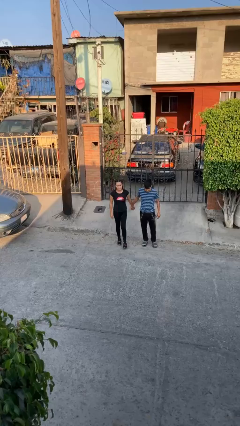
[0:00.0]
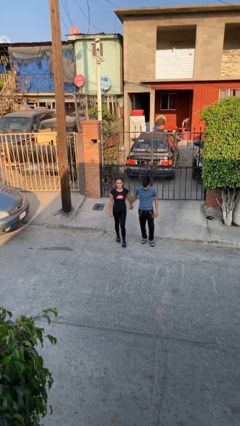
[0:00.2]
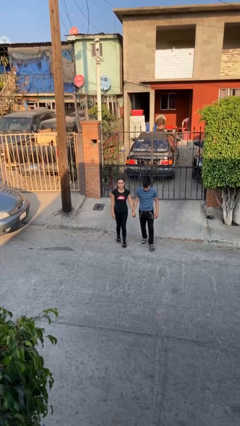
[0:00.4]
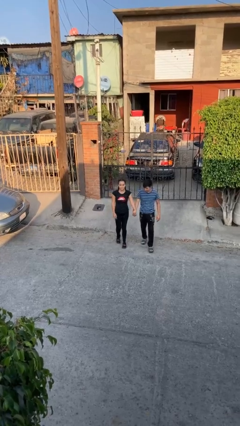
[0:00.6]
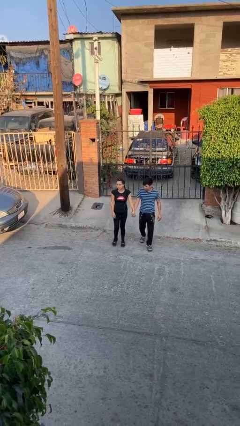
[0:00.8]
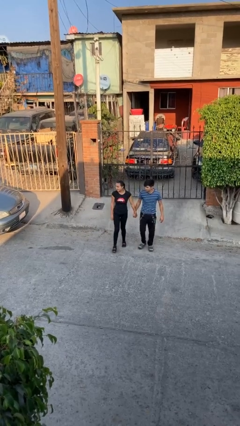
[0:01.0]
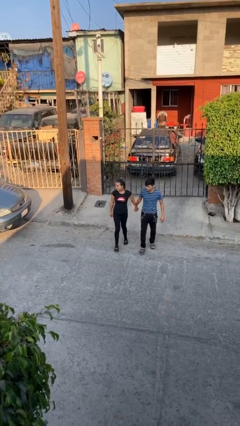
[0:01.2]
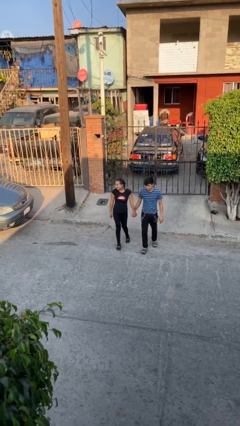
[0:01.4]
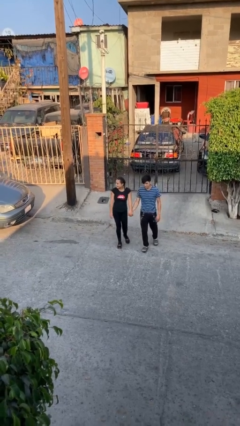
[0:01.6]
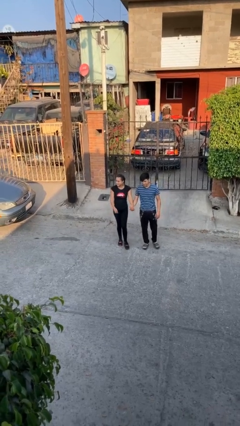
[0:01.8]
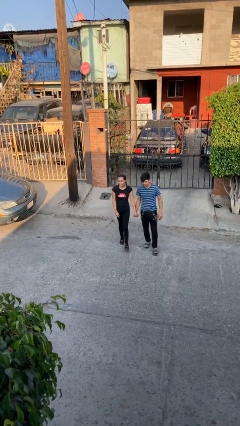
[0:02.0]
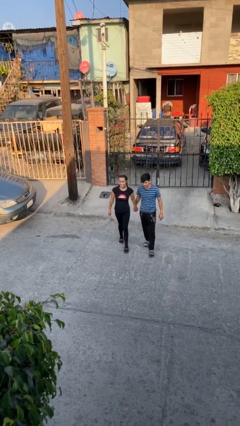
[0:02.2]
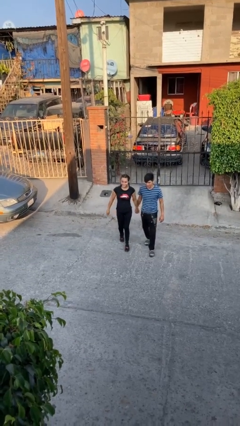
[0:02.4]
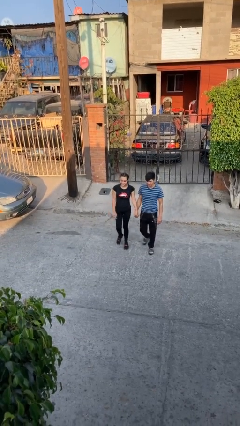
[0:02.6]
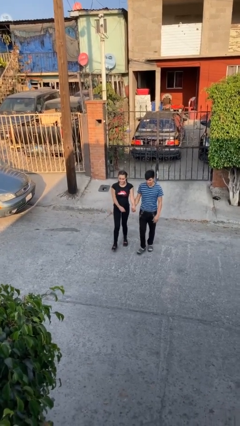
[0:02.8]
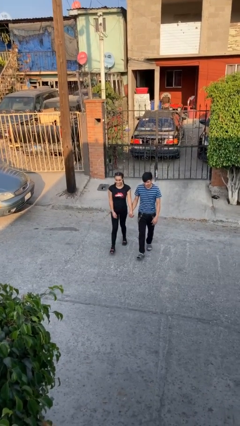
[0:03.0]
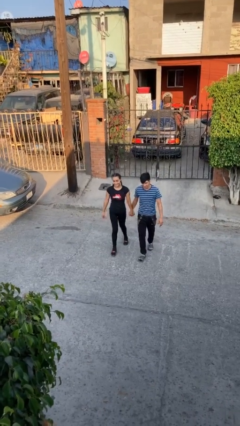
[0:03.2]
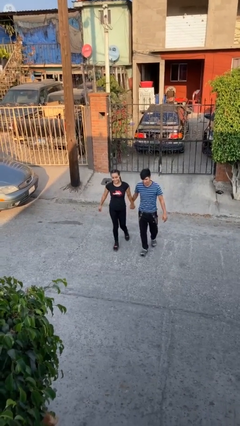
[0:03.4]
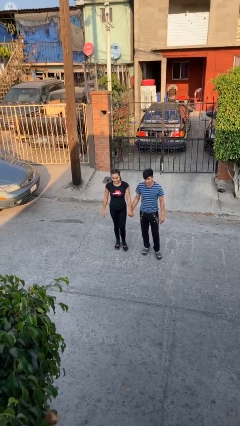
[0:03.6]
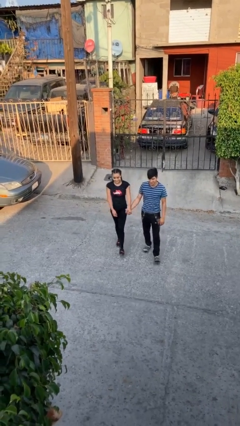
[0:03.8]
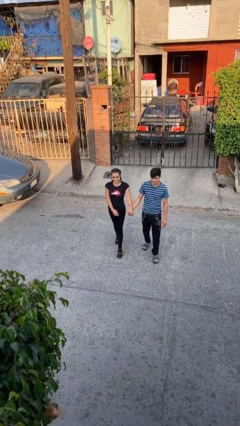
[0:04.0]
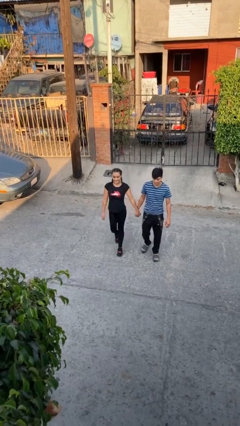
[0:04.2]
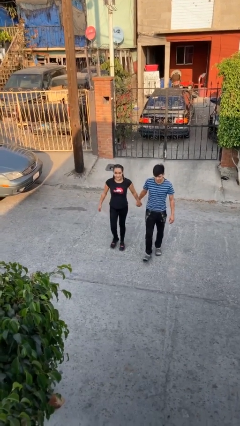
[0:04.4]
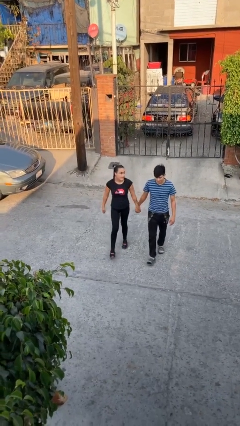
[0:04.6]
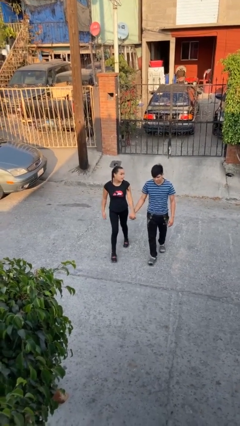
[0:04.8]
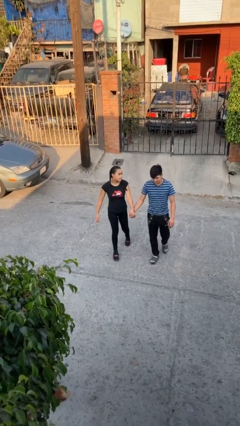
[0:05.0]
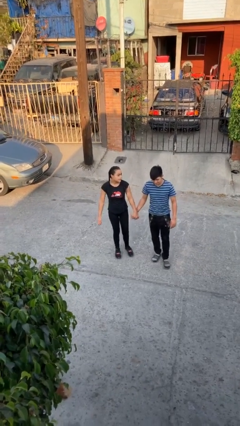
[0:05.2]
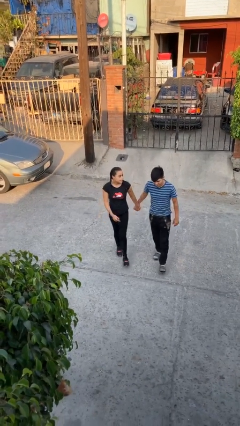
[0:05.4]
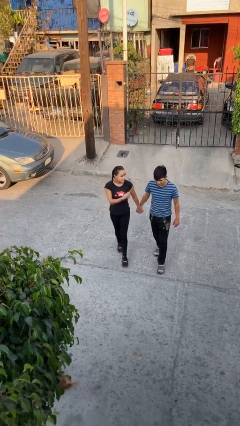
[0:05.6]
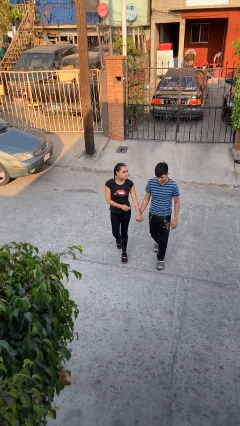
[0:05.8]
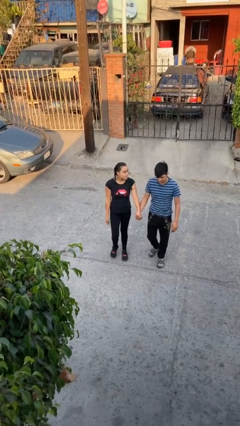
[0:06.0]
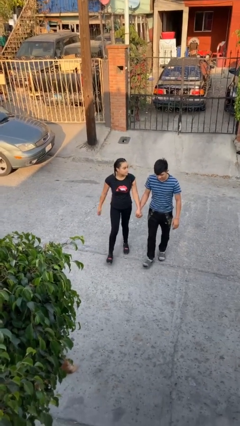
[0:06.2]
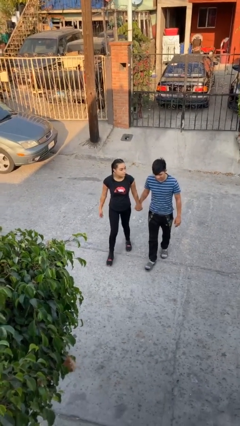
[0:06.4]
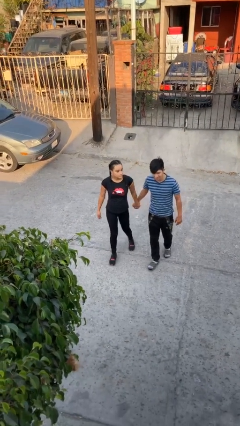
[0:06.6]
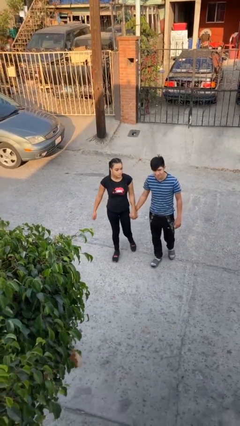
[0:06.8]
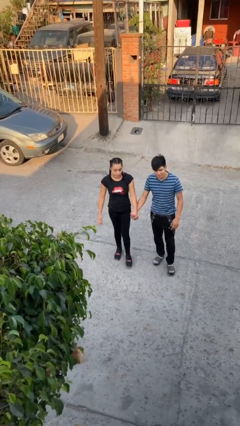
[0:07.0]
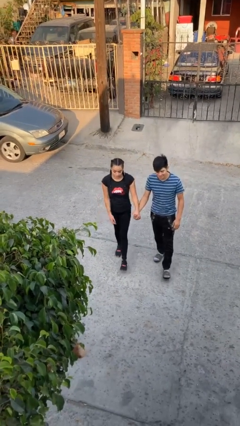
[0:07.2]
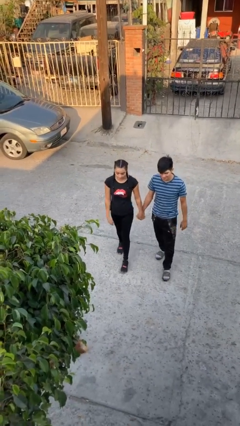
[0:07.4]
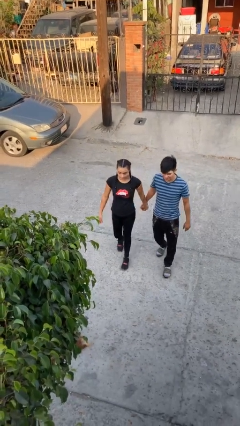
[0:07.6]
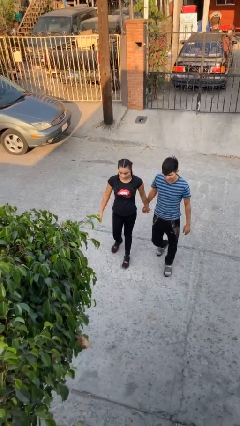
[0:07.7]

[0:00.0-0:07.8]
person holds hand

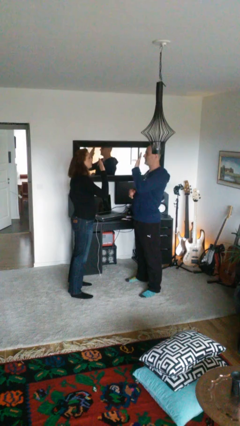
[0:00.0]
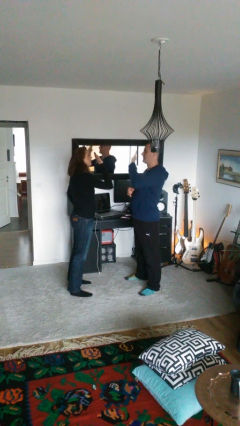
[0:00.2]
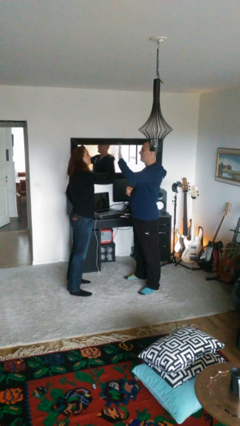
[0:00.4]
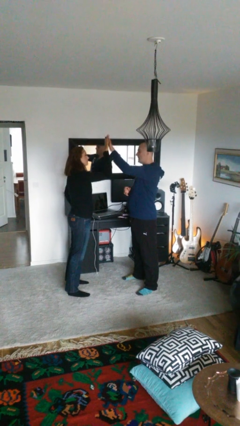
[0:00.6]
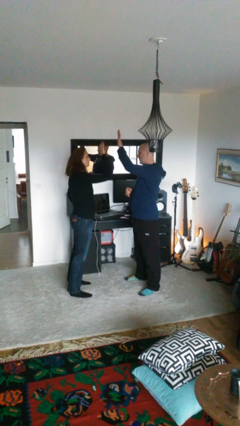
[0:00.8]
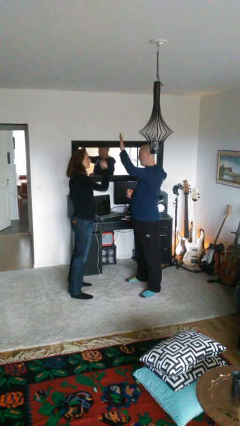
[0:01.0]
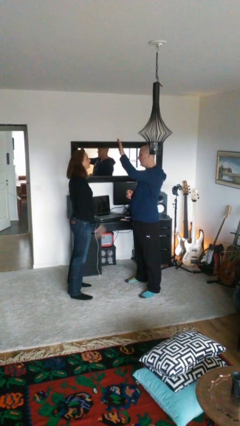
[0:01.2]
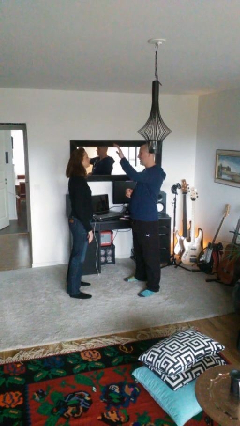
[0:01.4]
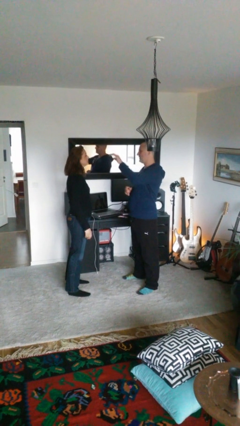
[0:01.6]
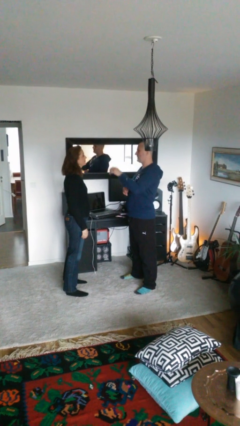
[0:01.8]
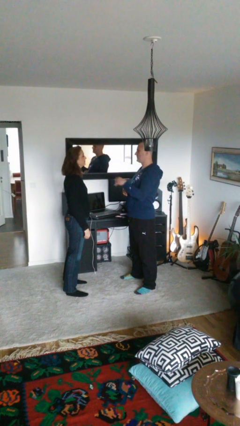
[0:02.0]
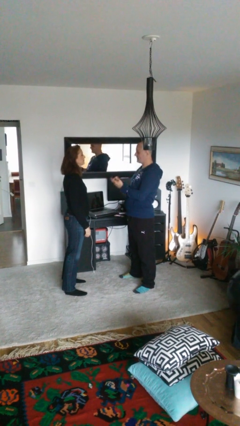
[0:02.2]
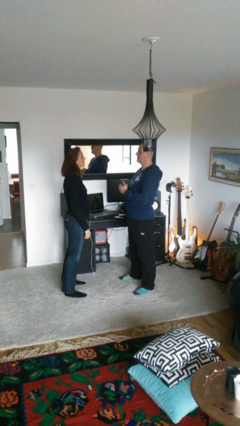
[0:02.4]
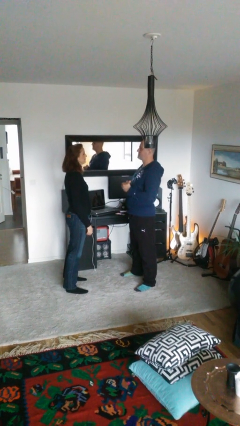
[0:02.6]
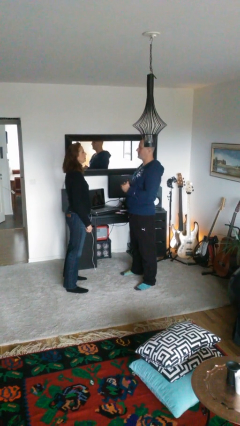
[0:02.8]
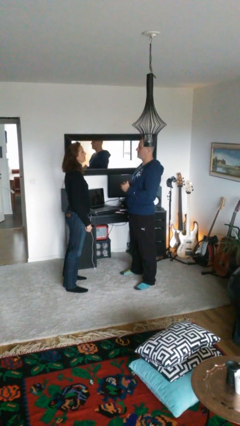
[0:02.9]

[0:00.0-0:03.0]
person highfives hand

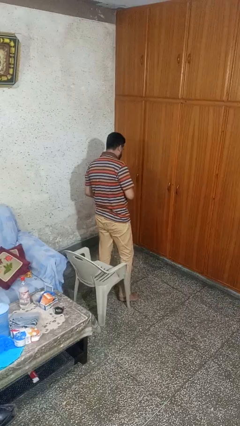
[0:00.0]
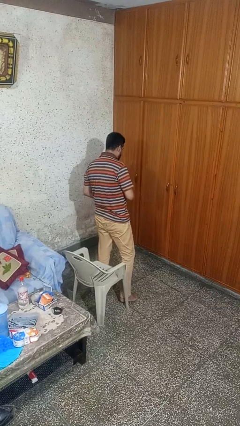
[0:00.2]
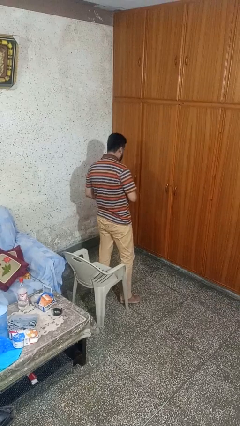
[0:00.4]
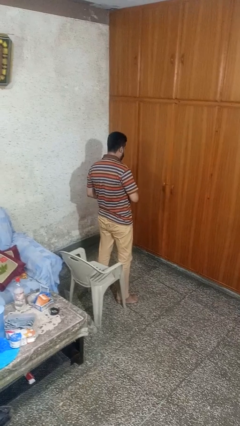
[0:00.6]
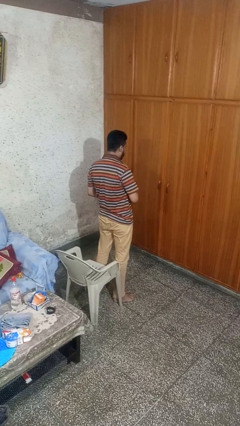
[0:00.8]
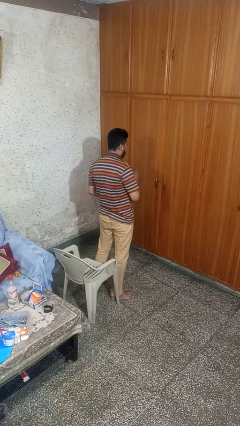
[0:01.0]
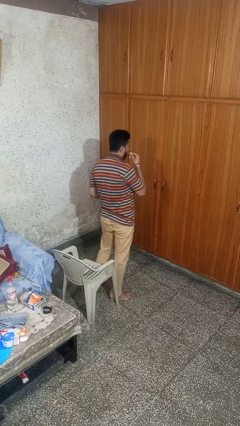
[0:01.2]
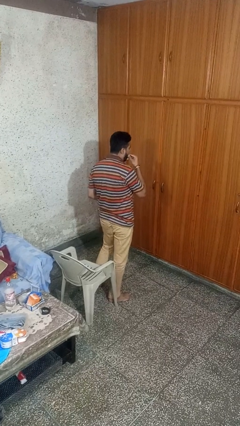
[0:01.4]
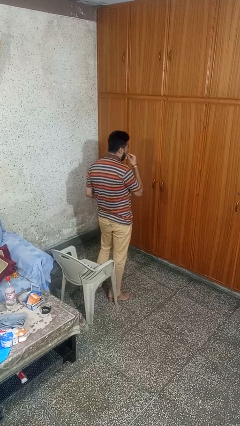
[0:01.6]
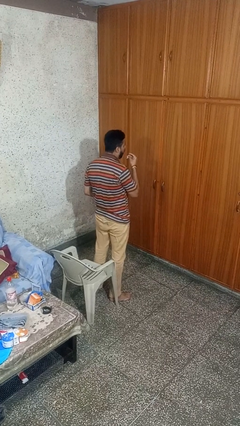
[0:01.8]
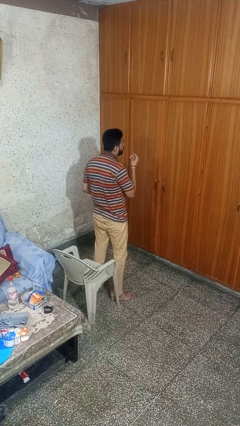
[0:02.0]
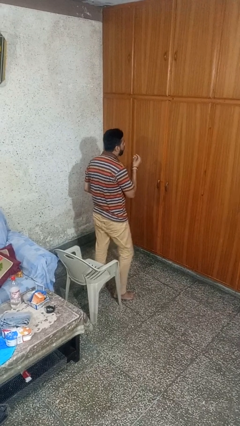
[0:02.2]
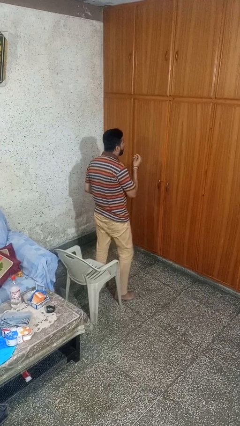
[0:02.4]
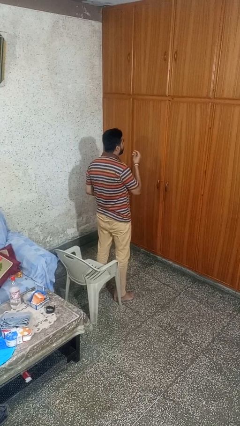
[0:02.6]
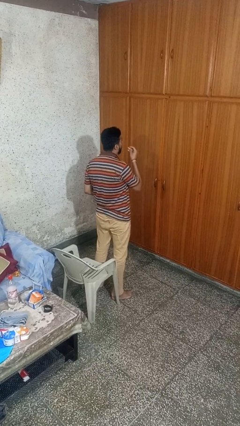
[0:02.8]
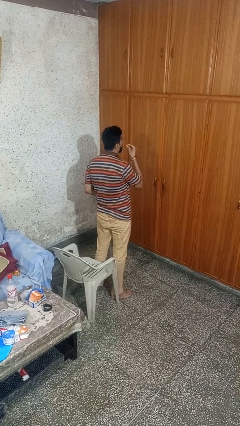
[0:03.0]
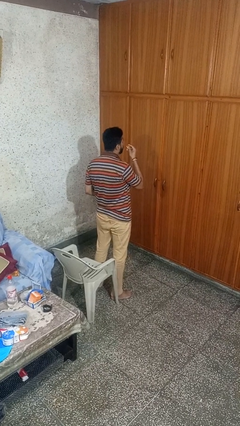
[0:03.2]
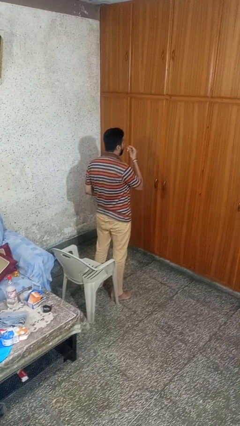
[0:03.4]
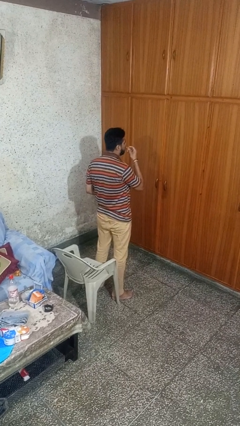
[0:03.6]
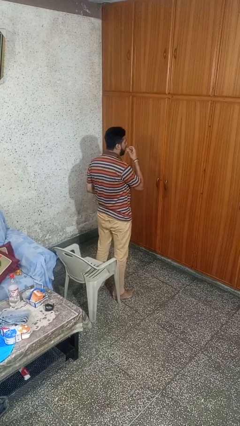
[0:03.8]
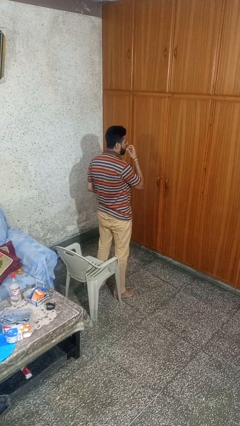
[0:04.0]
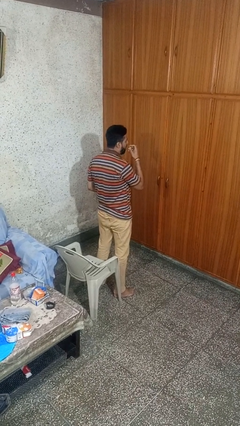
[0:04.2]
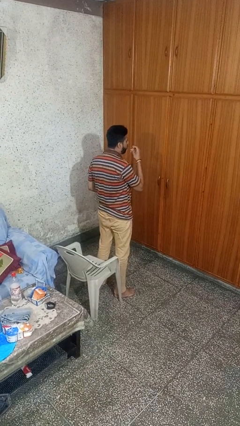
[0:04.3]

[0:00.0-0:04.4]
person eats snack from bag

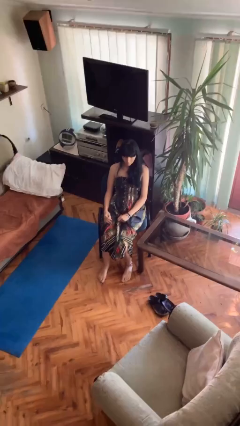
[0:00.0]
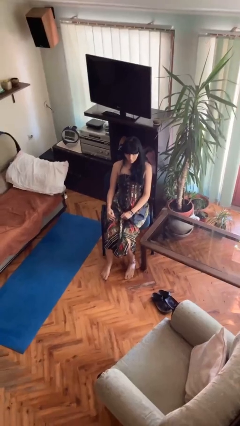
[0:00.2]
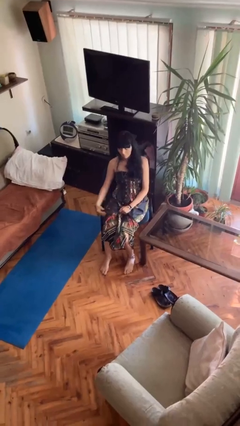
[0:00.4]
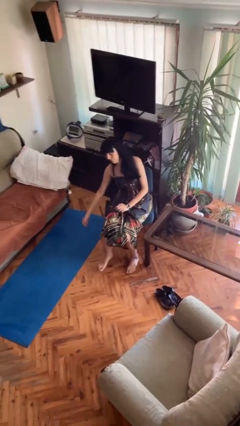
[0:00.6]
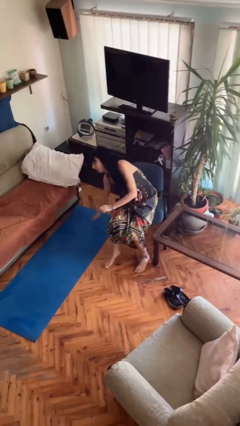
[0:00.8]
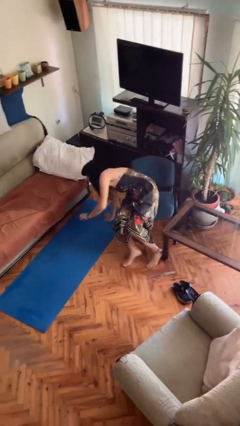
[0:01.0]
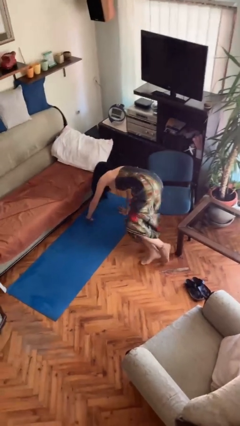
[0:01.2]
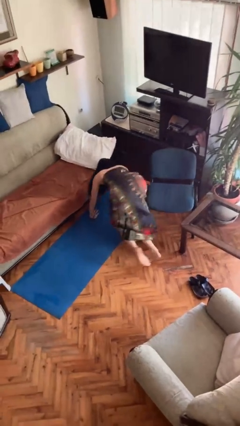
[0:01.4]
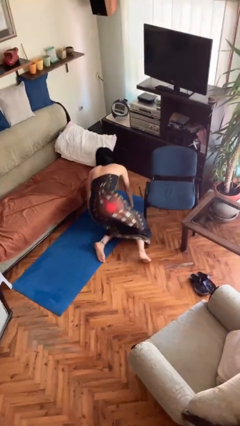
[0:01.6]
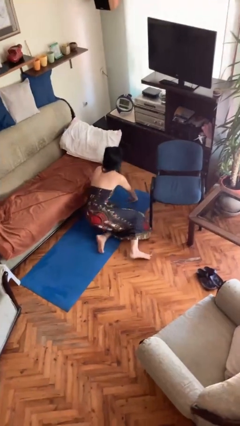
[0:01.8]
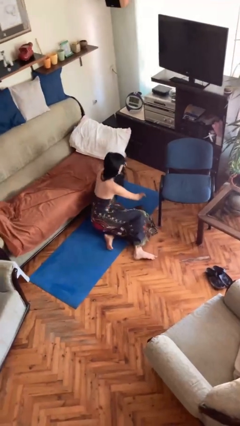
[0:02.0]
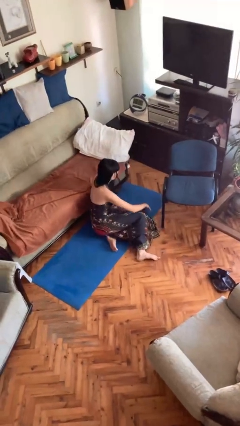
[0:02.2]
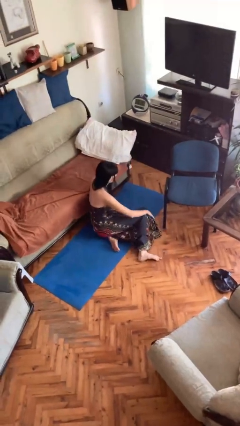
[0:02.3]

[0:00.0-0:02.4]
person falls from chair

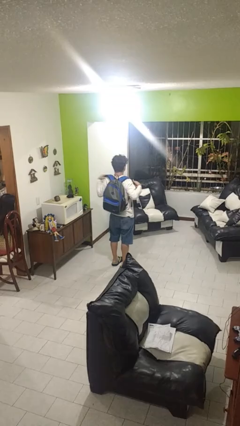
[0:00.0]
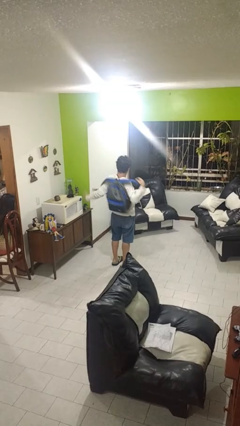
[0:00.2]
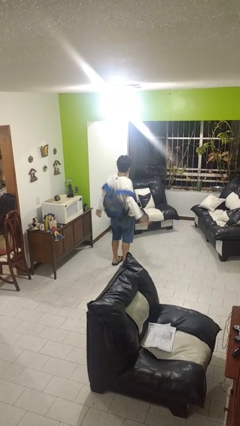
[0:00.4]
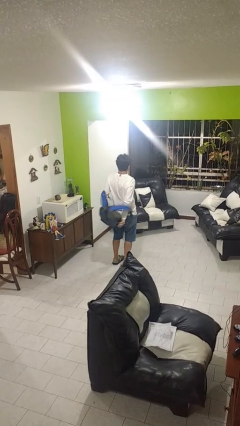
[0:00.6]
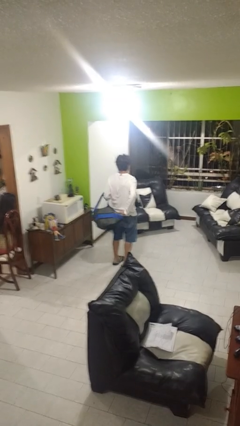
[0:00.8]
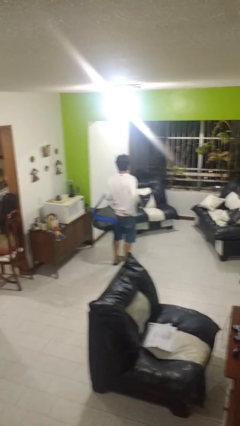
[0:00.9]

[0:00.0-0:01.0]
person takes off backpack
